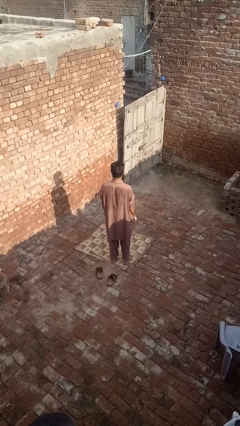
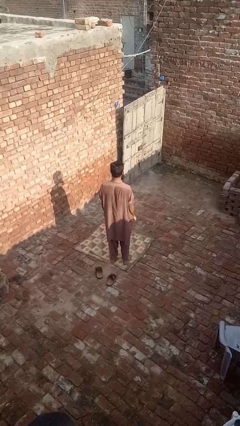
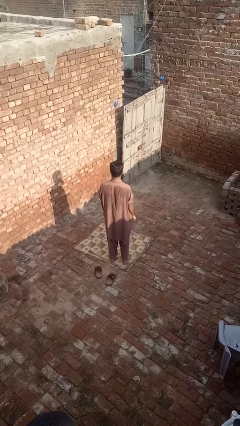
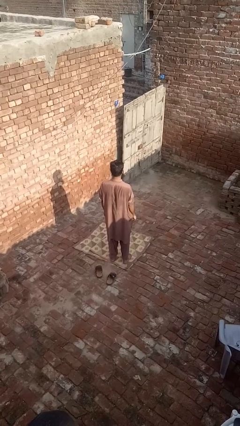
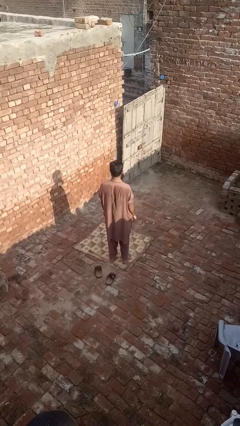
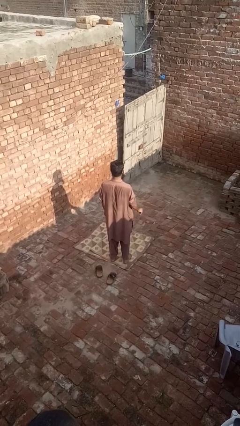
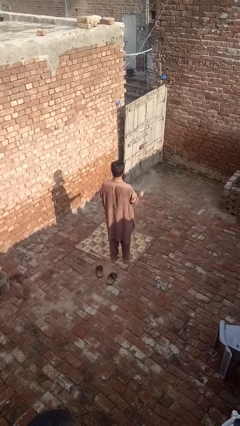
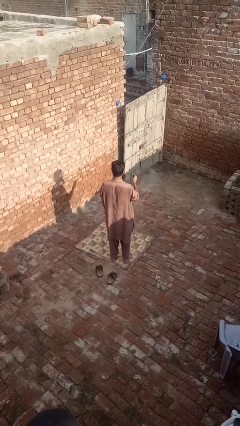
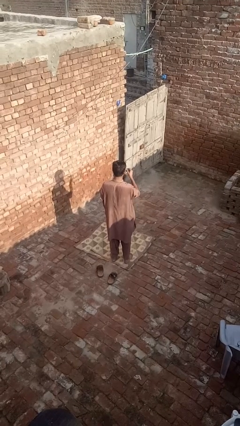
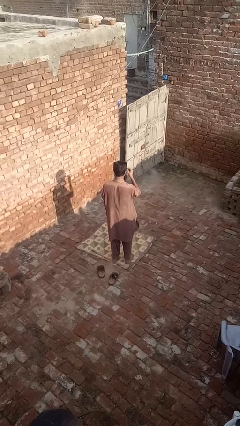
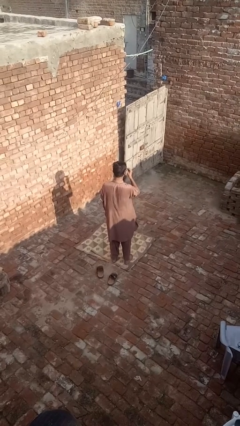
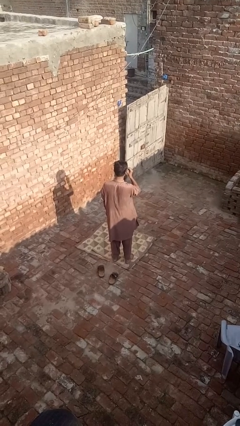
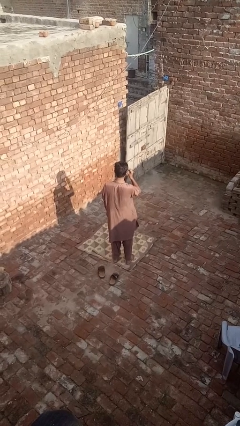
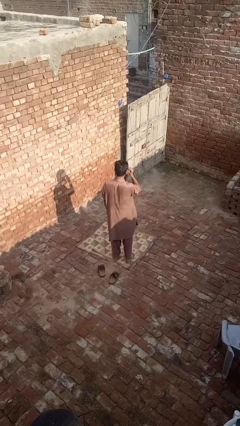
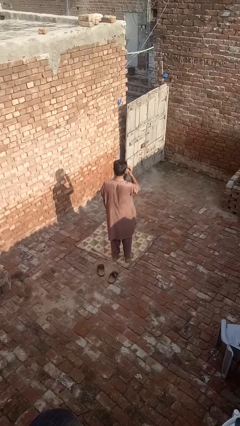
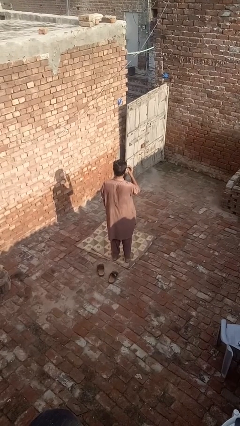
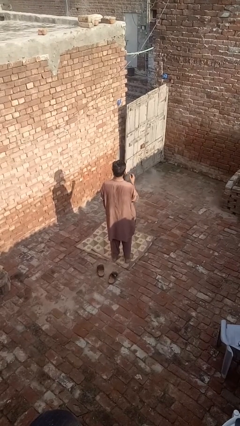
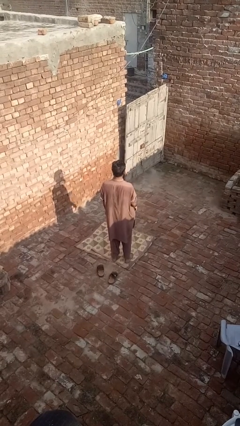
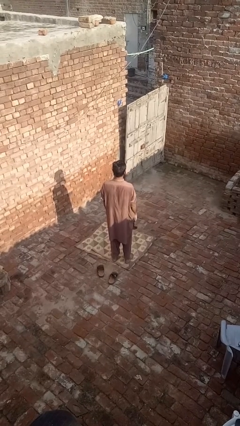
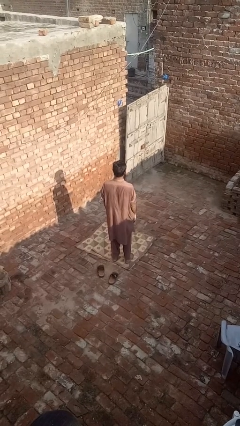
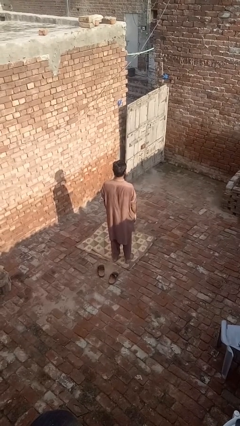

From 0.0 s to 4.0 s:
person puts on glasses

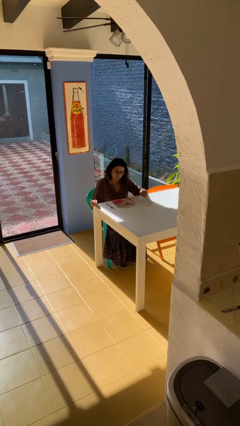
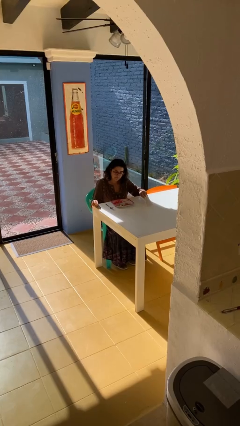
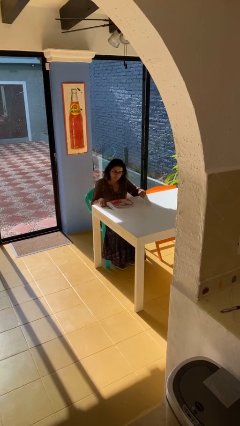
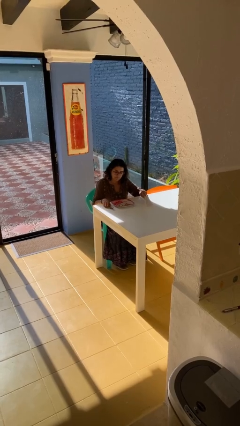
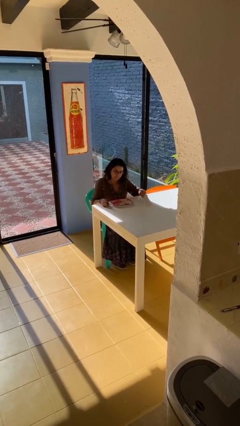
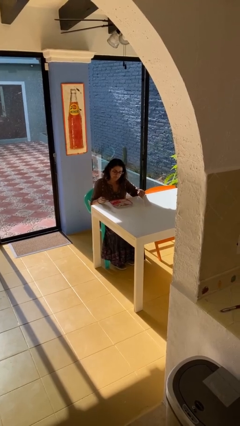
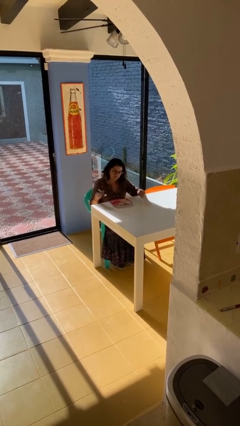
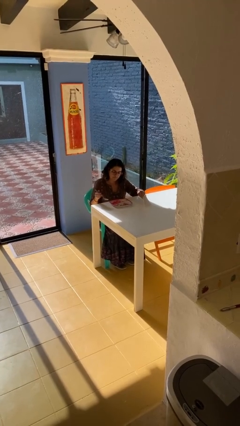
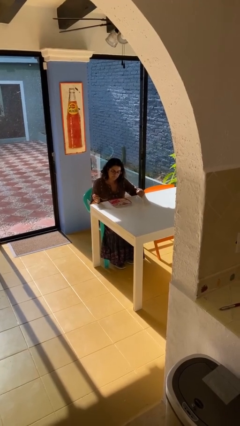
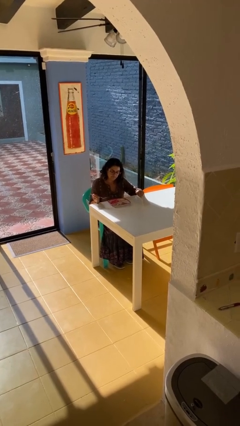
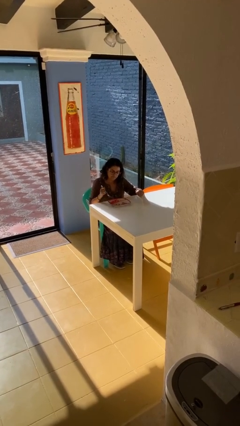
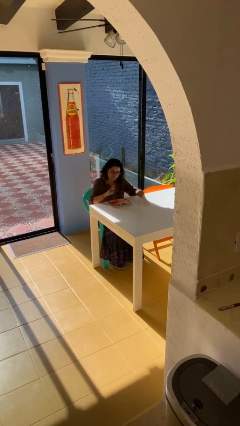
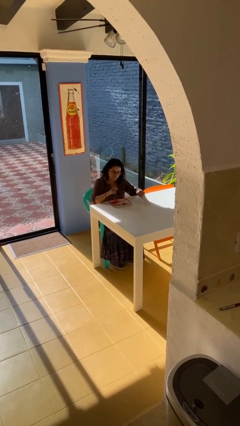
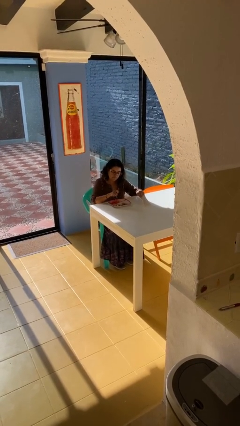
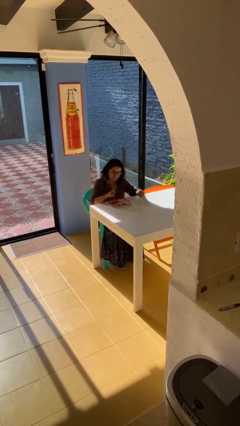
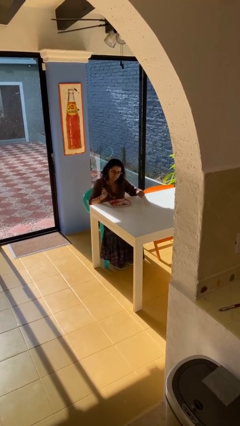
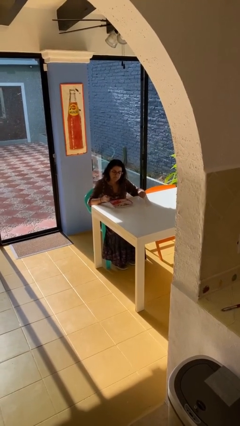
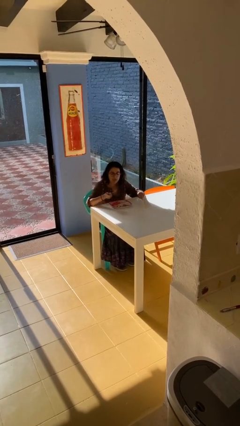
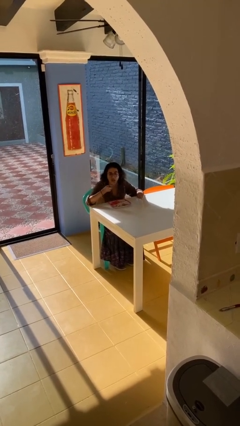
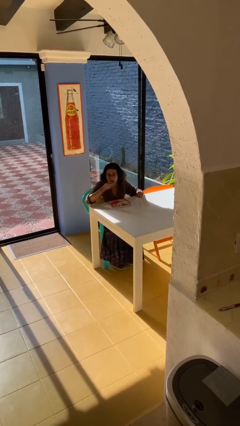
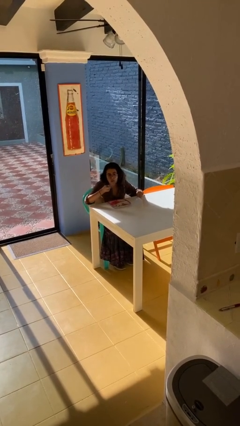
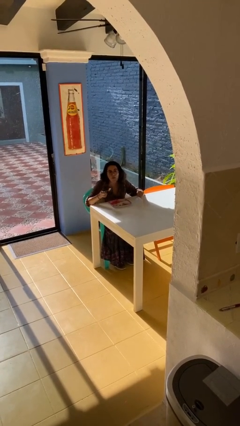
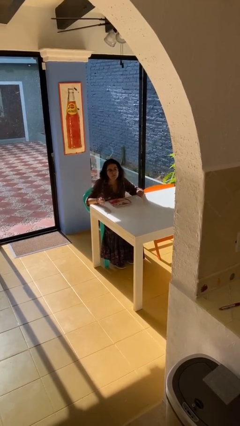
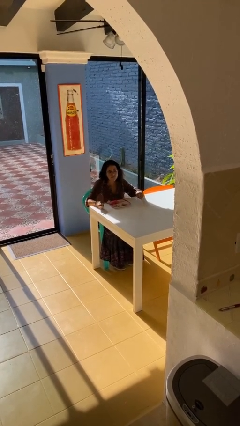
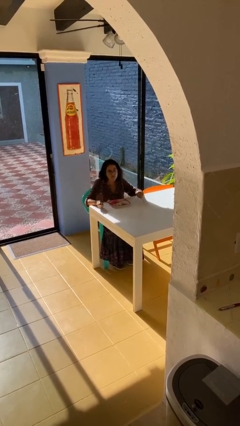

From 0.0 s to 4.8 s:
person eats with utensil

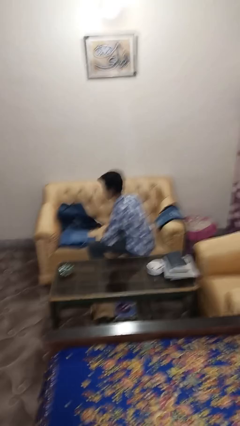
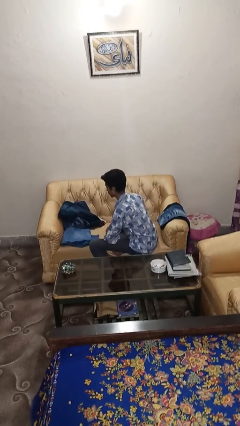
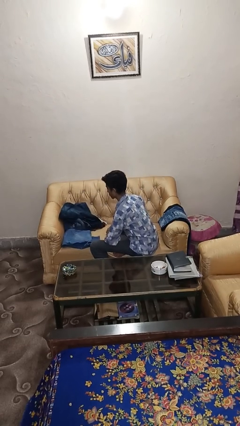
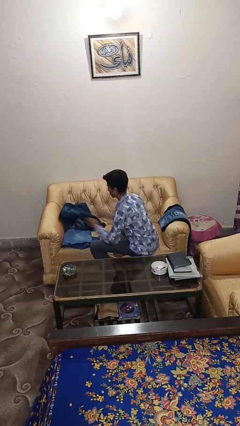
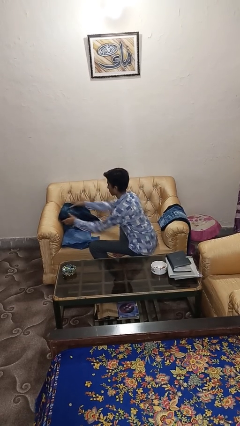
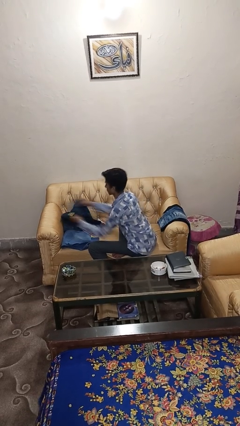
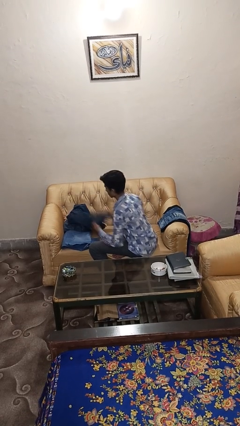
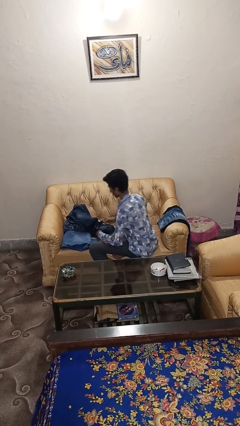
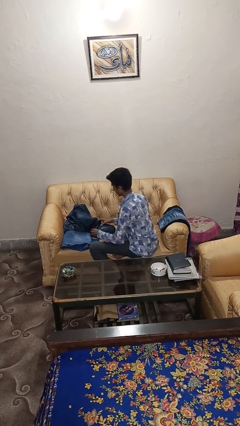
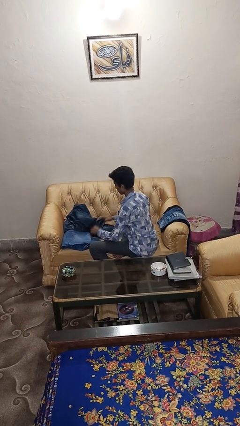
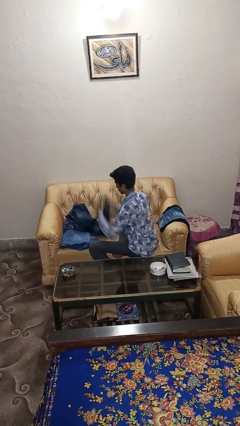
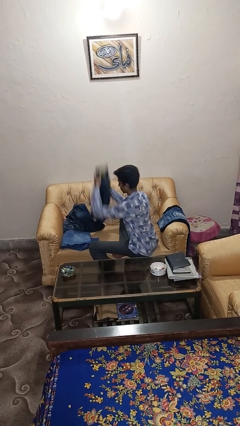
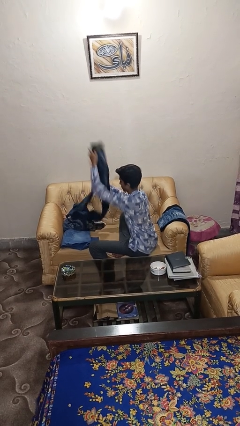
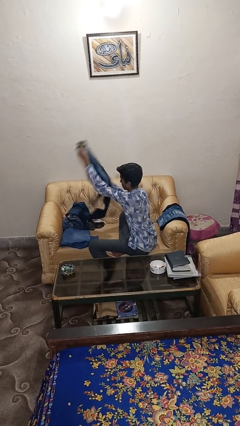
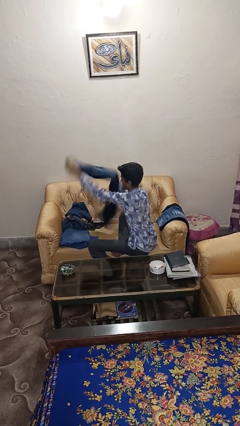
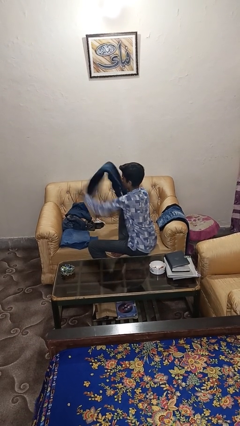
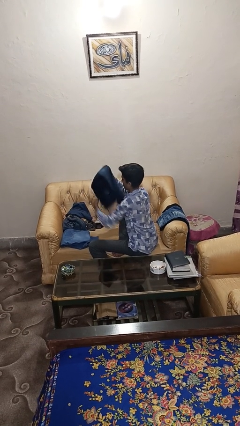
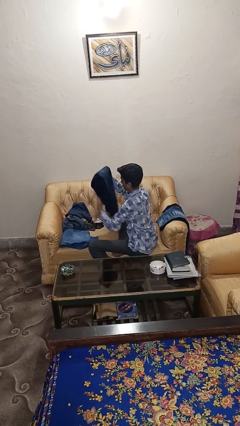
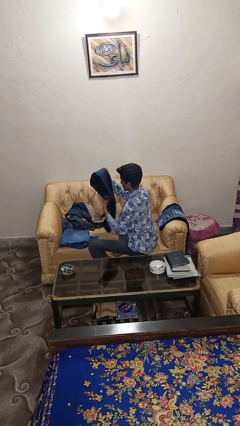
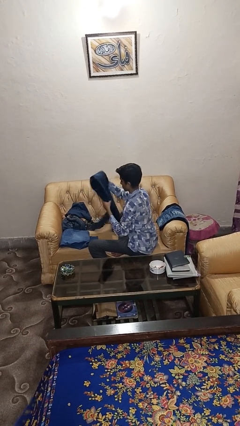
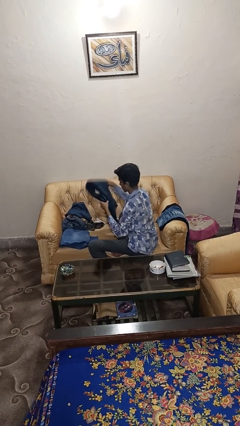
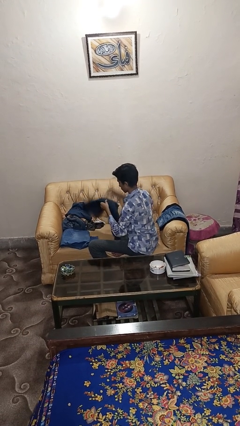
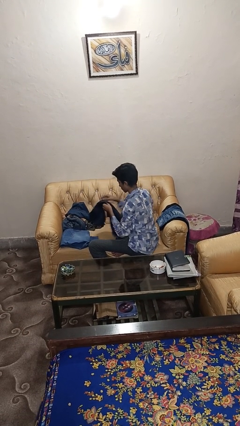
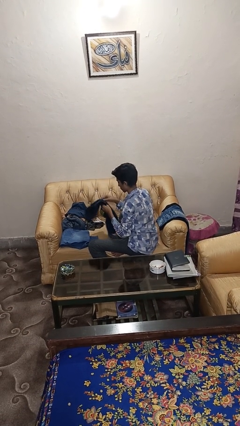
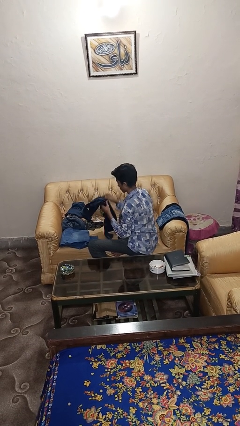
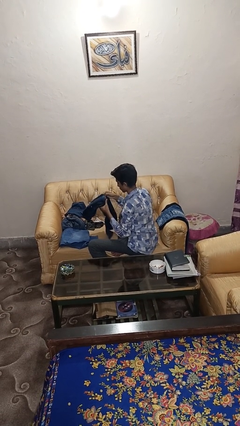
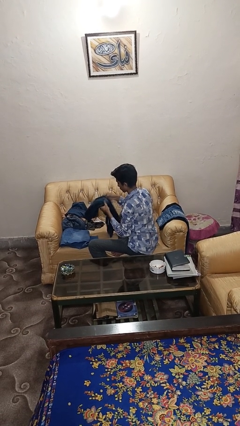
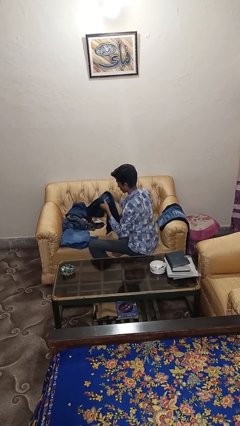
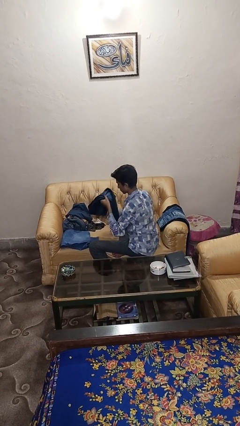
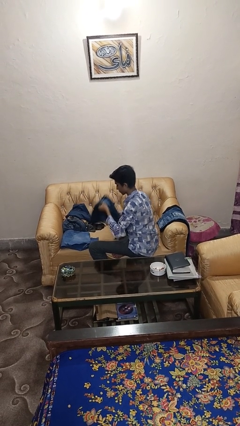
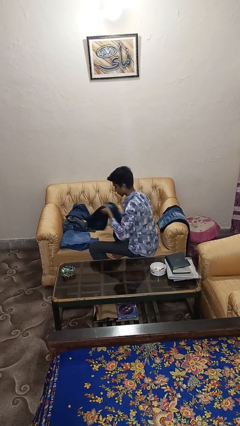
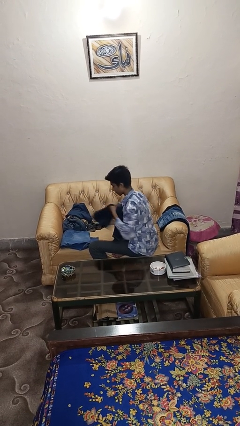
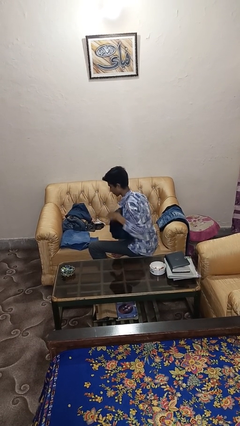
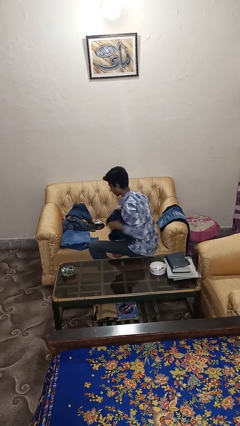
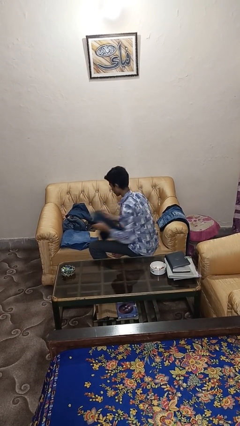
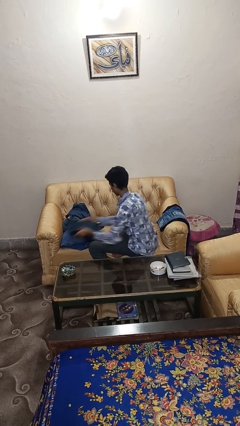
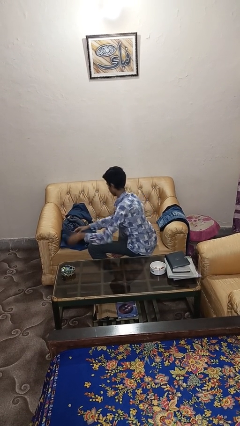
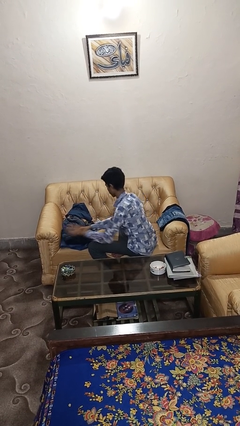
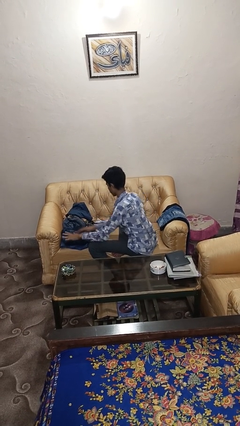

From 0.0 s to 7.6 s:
person folds pants

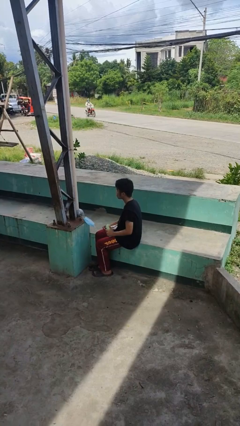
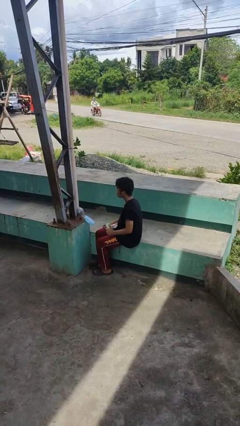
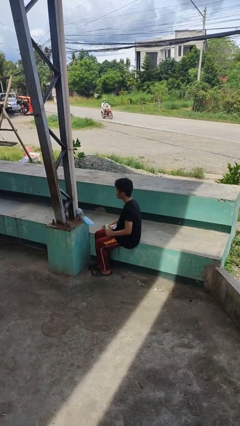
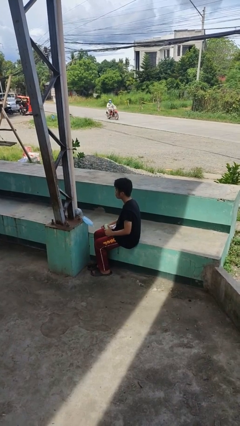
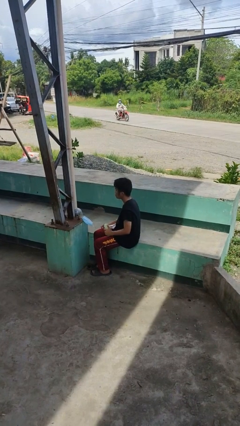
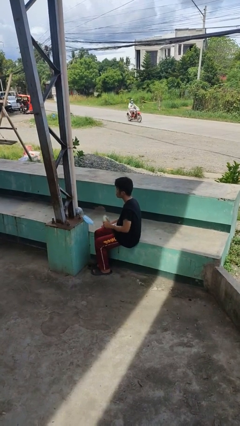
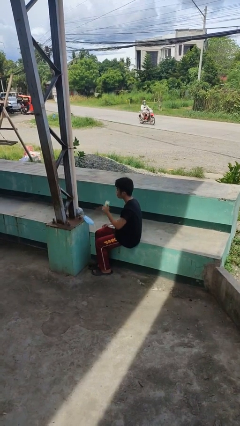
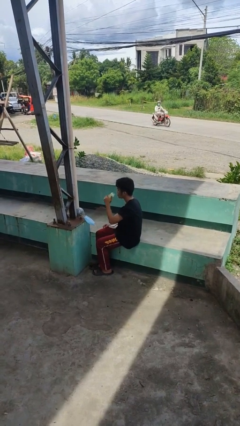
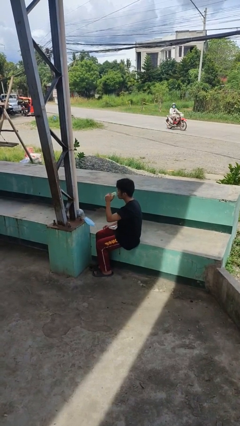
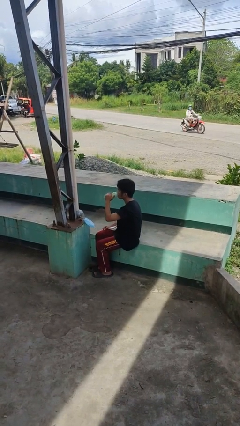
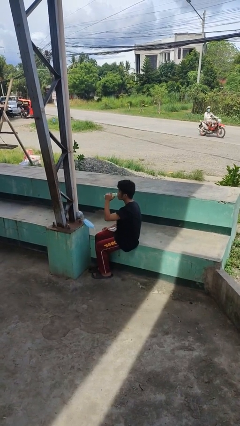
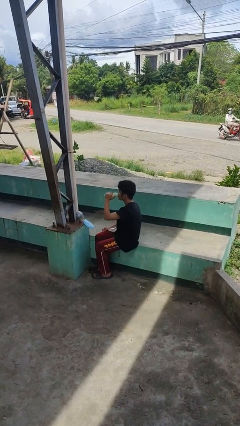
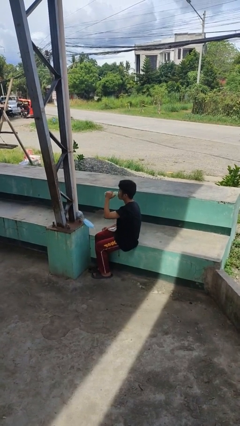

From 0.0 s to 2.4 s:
person interacts with tablet
